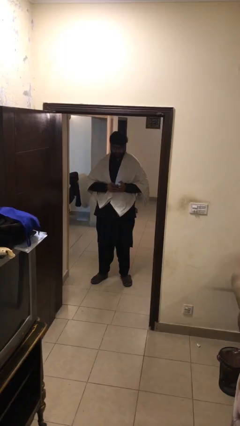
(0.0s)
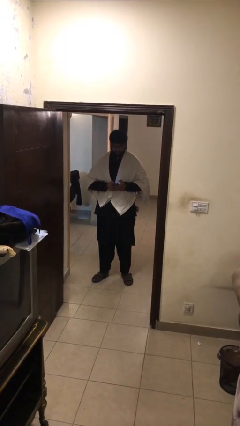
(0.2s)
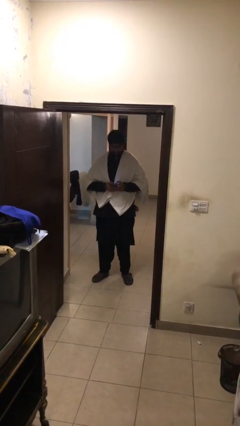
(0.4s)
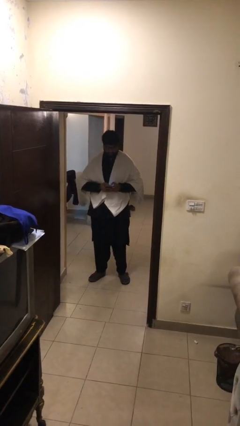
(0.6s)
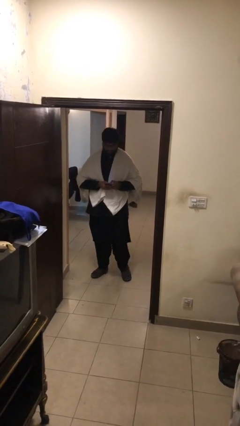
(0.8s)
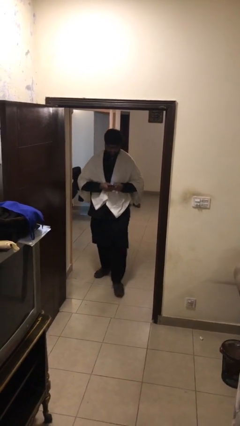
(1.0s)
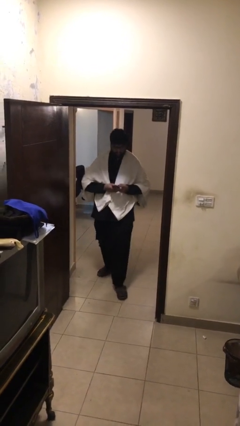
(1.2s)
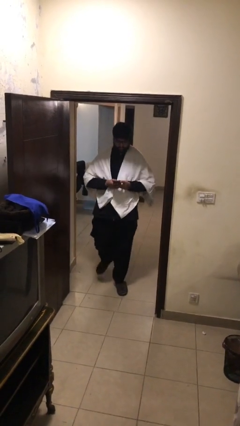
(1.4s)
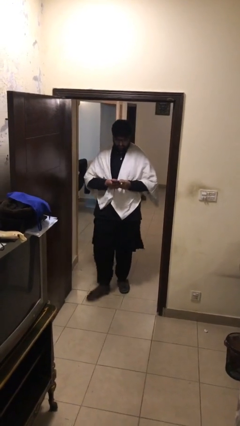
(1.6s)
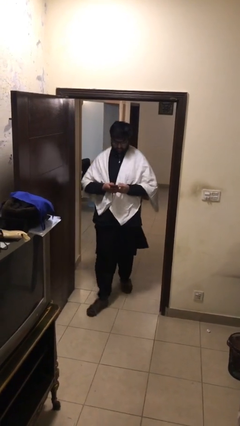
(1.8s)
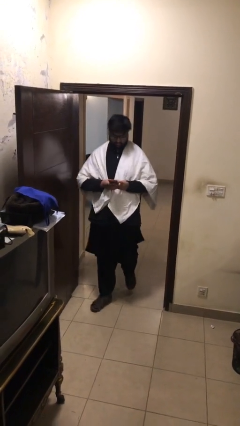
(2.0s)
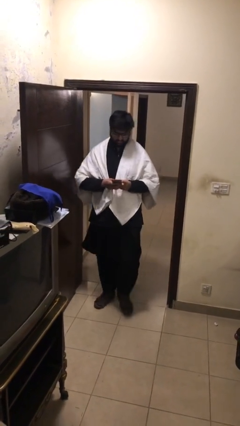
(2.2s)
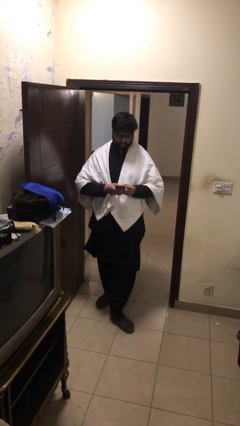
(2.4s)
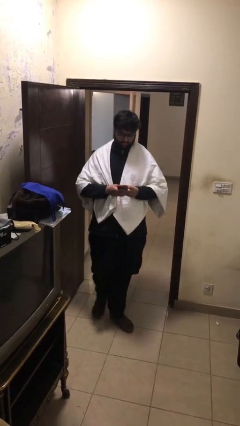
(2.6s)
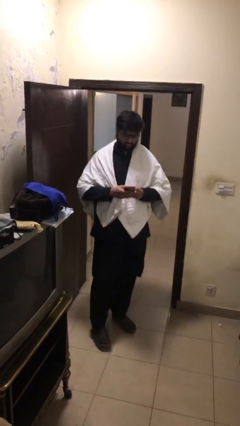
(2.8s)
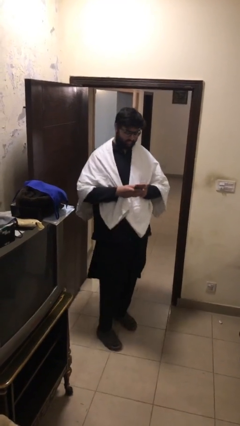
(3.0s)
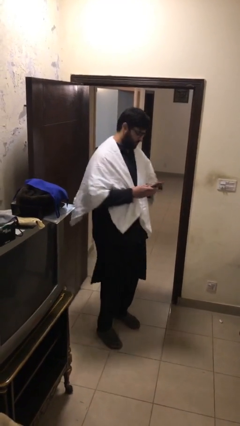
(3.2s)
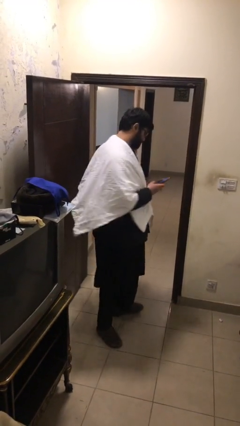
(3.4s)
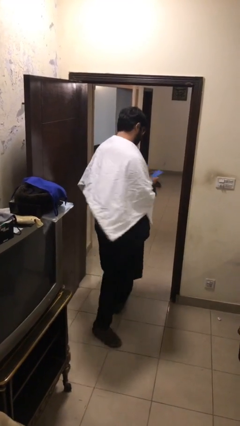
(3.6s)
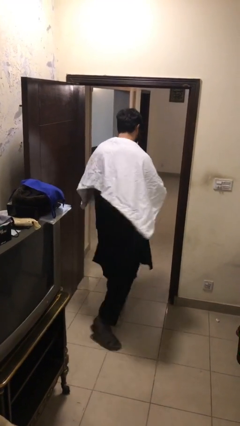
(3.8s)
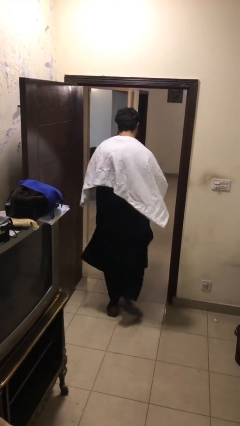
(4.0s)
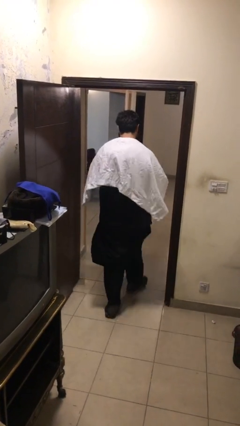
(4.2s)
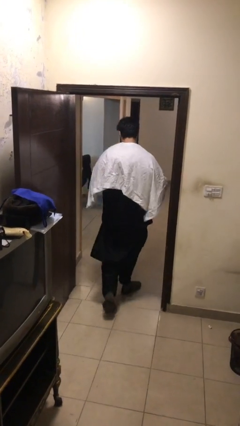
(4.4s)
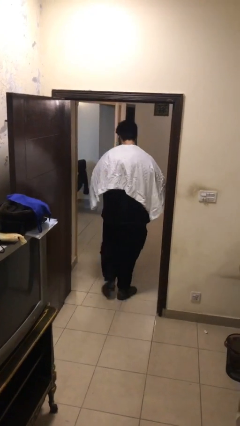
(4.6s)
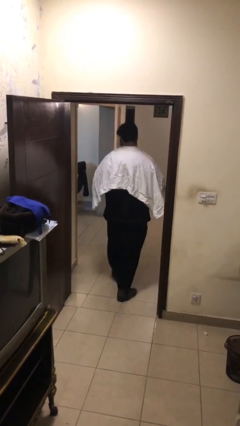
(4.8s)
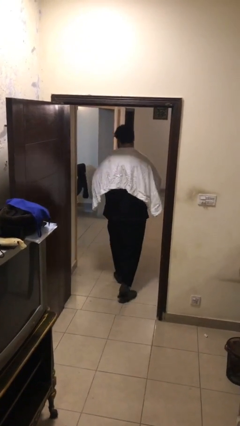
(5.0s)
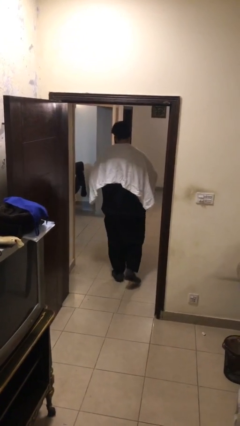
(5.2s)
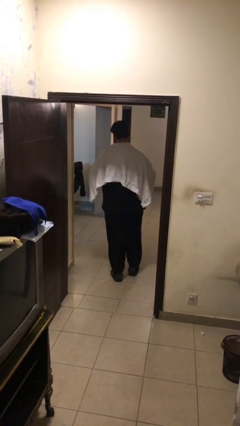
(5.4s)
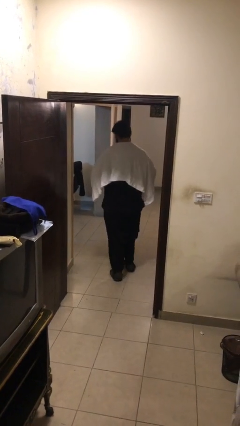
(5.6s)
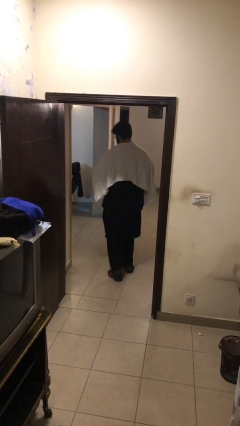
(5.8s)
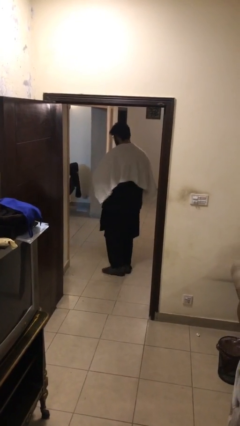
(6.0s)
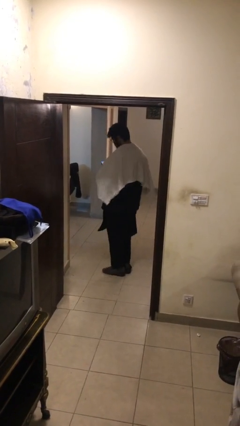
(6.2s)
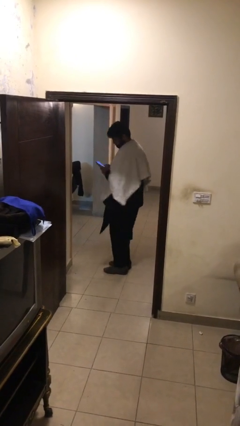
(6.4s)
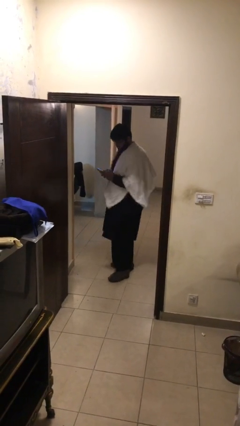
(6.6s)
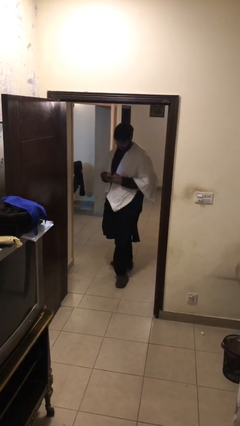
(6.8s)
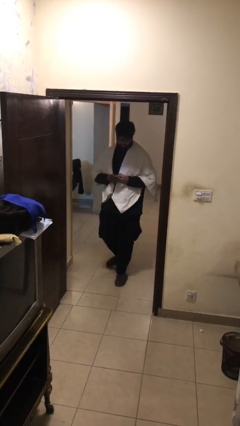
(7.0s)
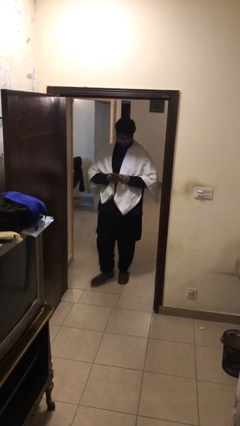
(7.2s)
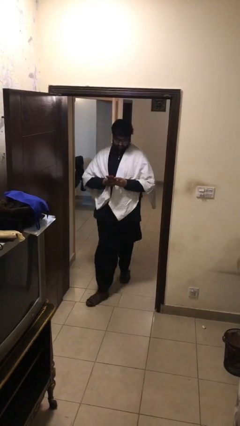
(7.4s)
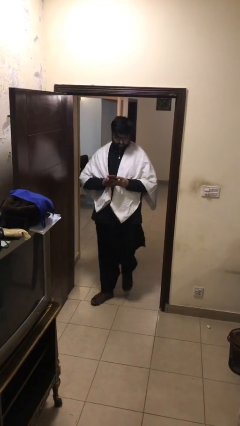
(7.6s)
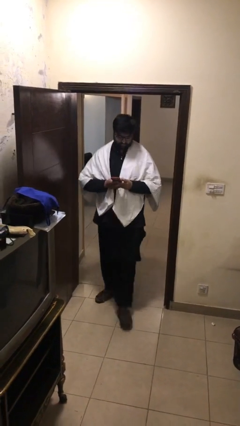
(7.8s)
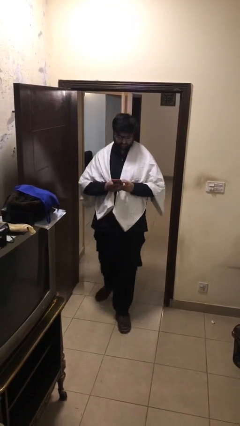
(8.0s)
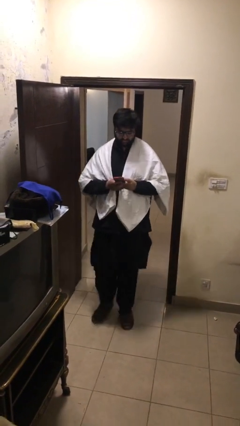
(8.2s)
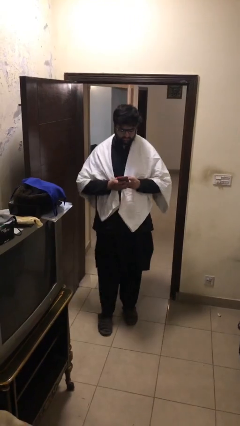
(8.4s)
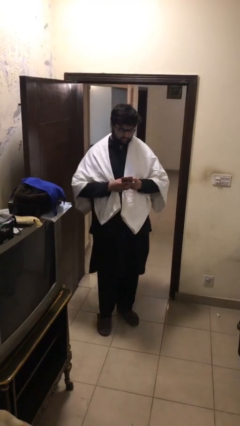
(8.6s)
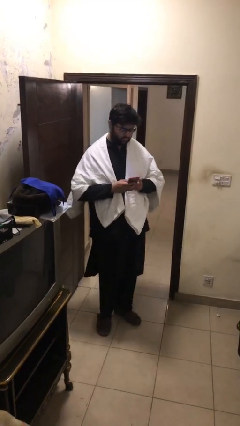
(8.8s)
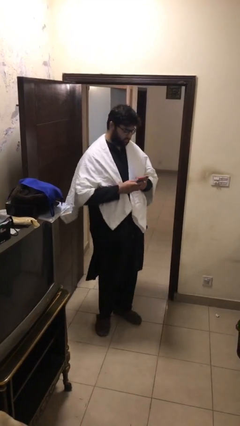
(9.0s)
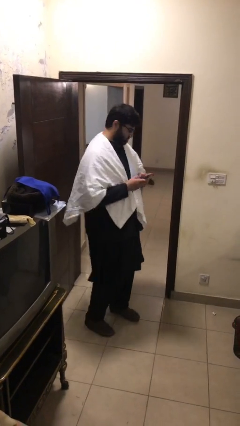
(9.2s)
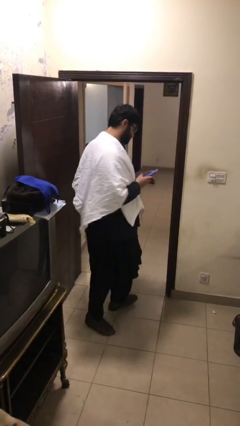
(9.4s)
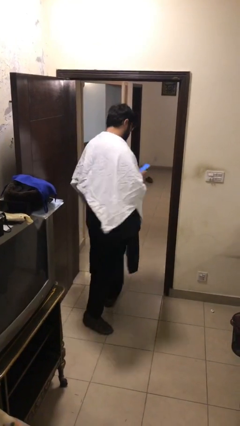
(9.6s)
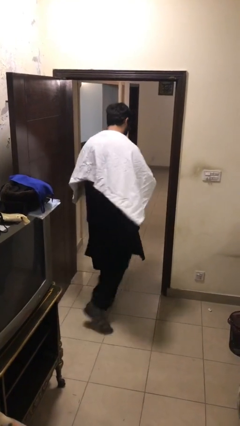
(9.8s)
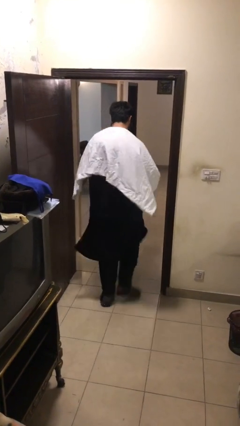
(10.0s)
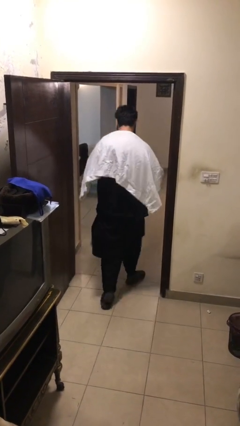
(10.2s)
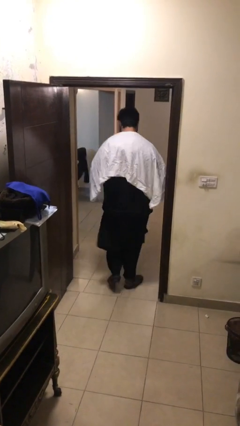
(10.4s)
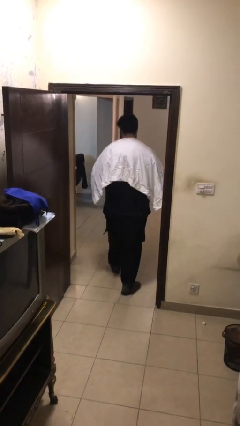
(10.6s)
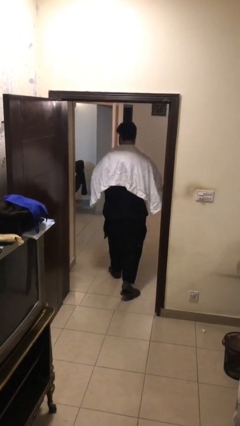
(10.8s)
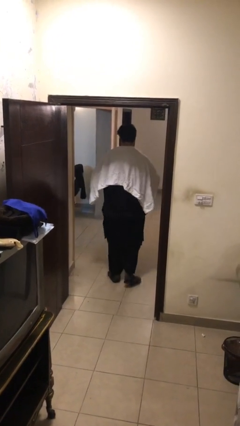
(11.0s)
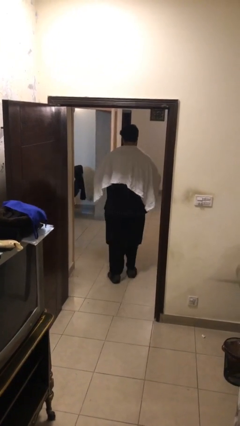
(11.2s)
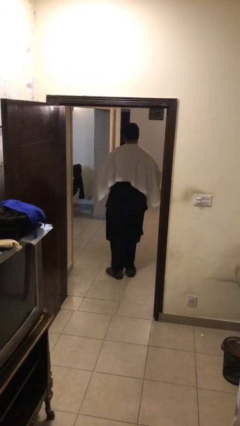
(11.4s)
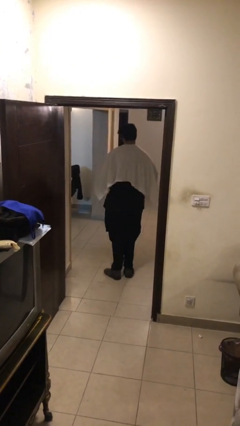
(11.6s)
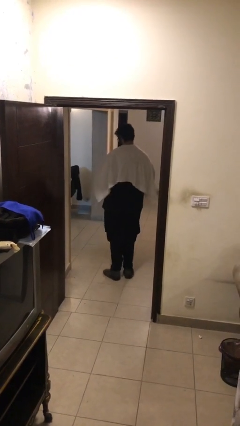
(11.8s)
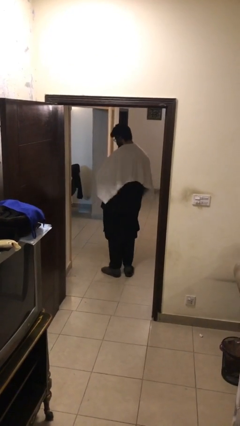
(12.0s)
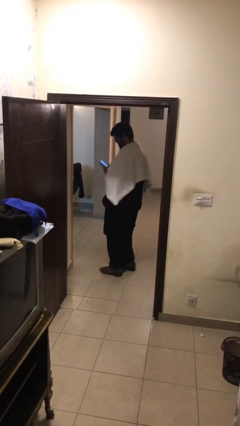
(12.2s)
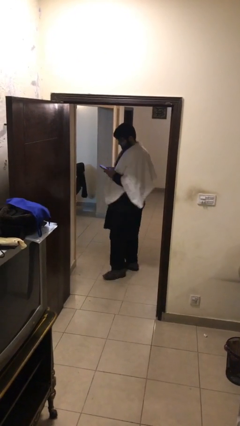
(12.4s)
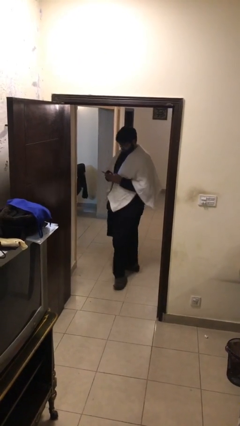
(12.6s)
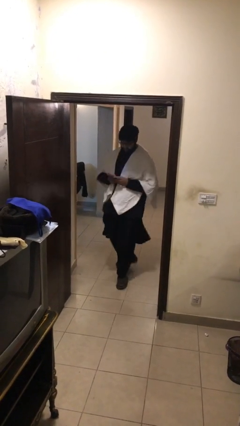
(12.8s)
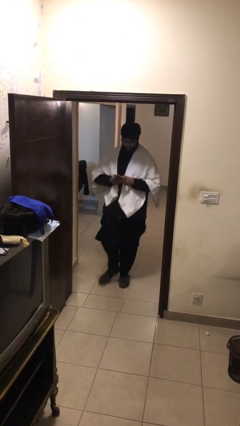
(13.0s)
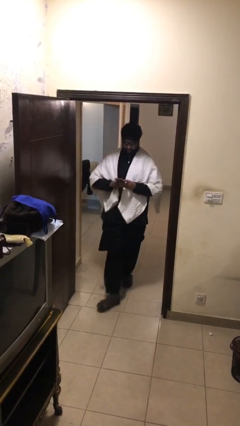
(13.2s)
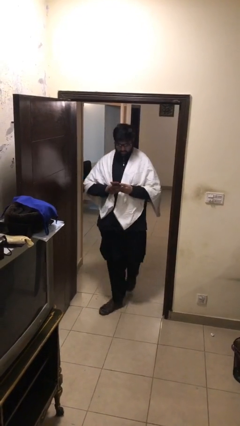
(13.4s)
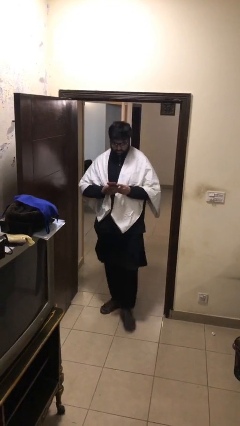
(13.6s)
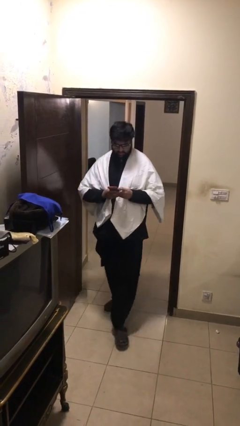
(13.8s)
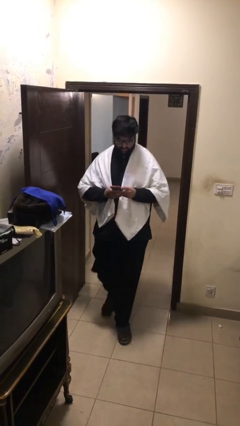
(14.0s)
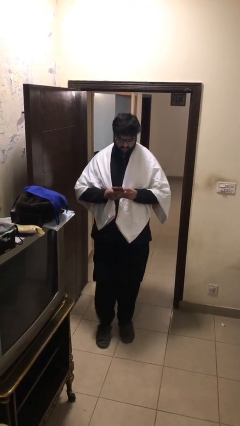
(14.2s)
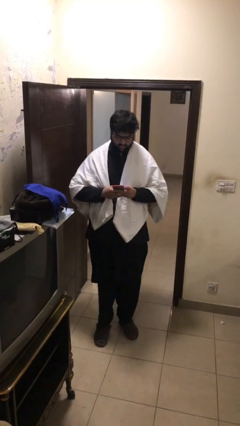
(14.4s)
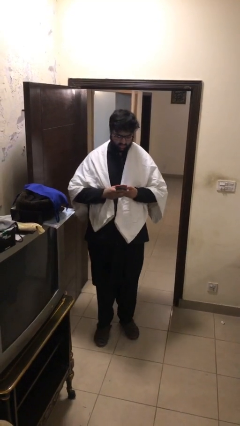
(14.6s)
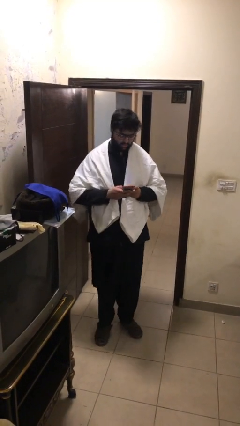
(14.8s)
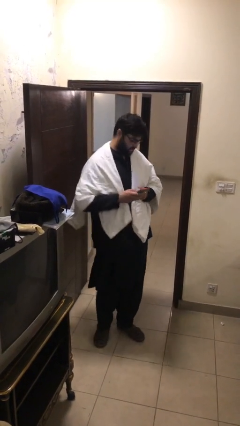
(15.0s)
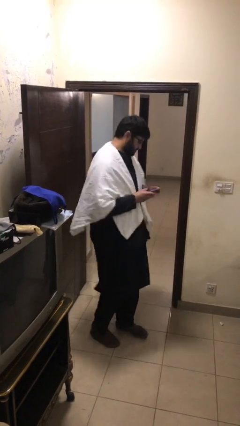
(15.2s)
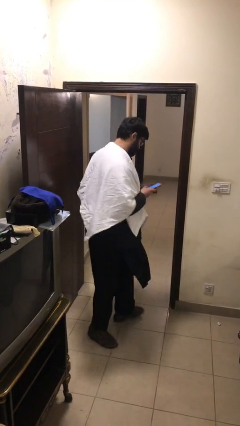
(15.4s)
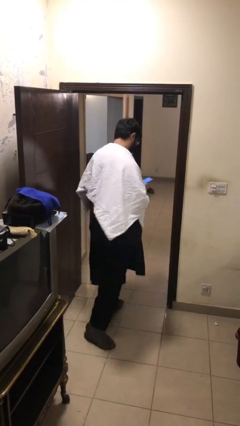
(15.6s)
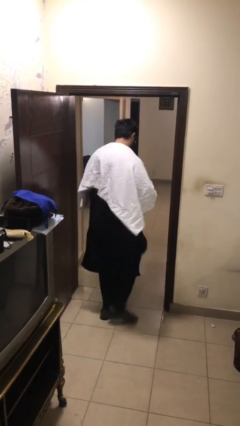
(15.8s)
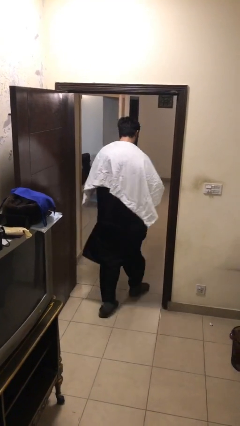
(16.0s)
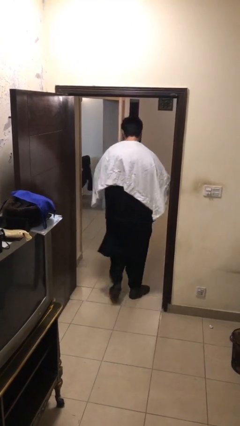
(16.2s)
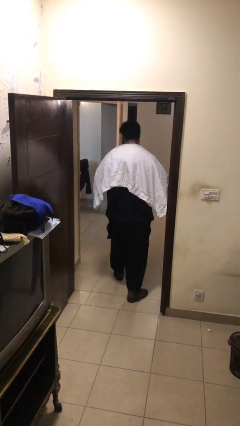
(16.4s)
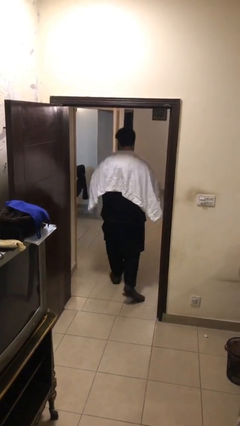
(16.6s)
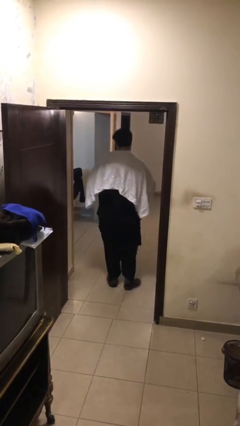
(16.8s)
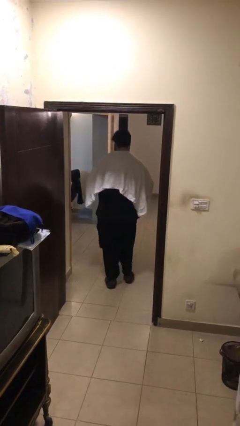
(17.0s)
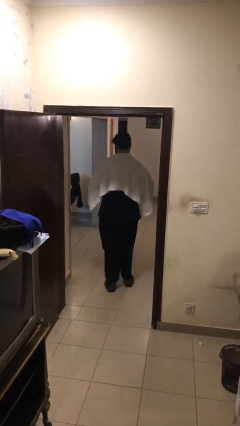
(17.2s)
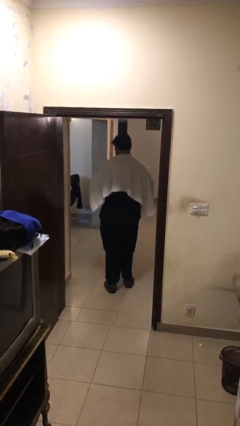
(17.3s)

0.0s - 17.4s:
person texts on phone

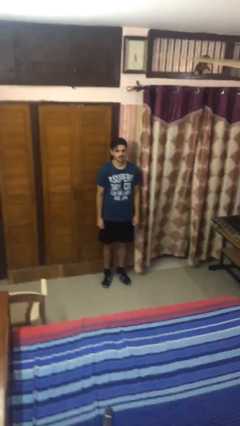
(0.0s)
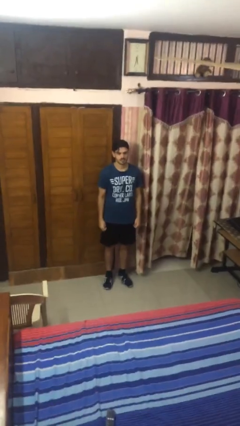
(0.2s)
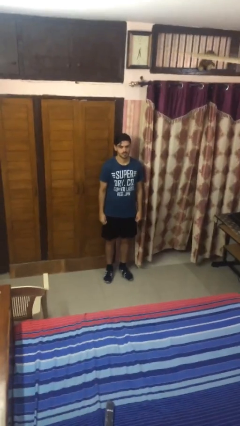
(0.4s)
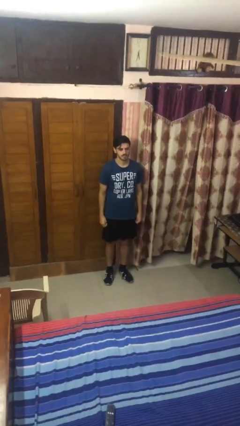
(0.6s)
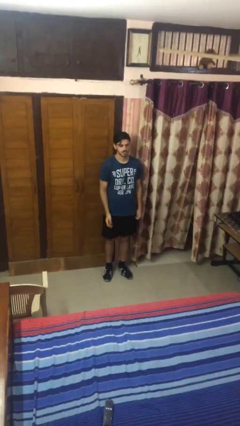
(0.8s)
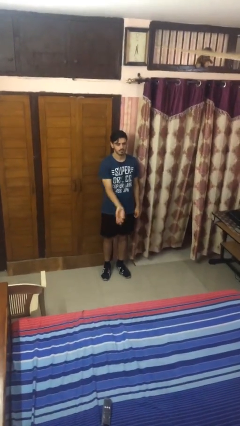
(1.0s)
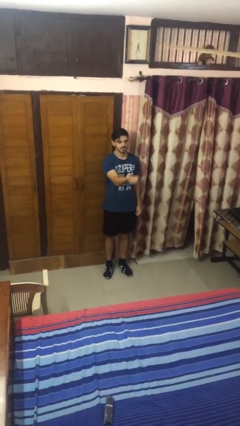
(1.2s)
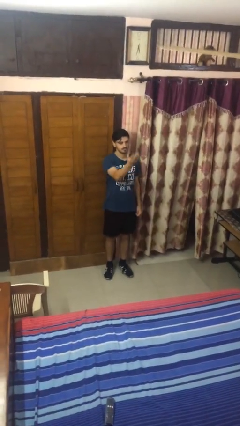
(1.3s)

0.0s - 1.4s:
person gestures swipe up
